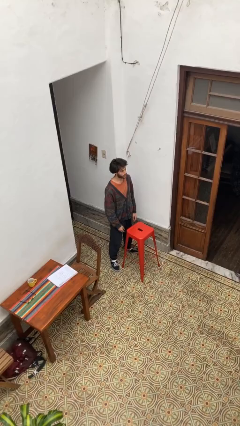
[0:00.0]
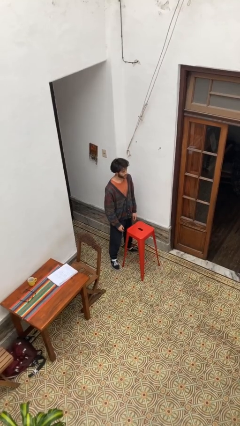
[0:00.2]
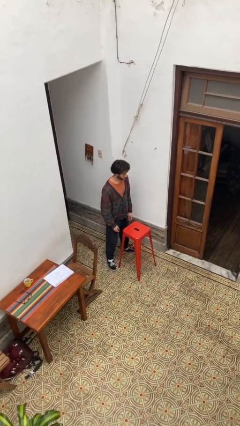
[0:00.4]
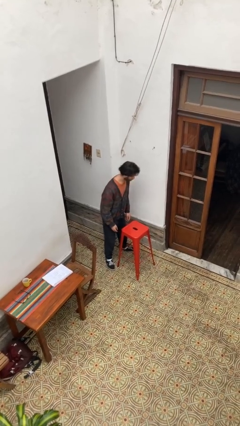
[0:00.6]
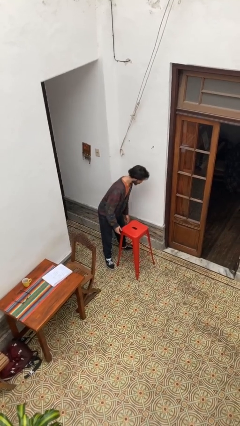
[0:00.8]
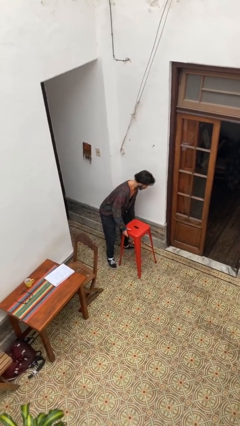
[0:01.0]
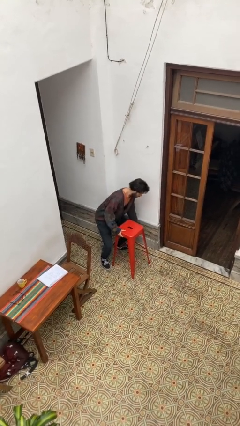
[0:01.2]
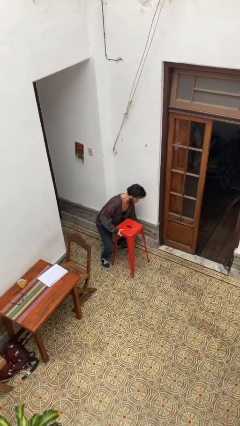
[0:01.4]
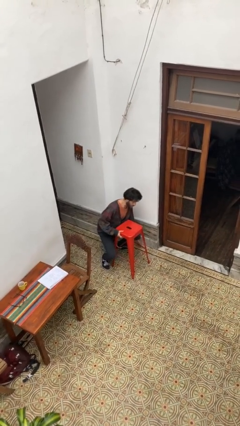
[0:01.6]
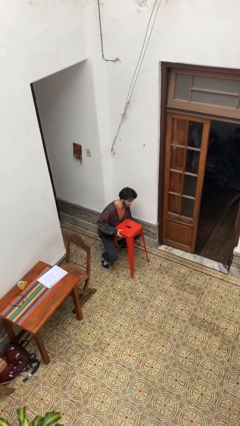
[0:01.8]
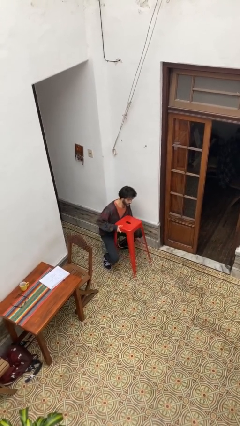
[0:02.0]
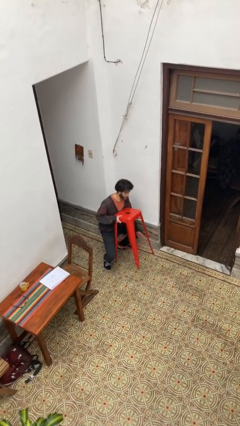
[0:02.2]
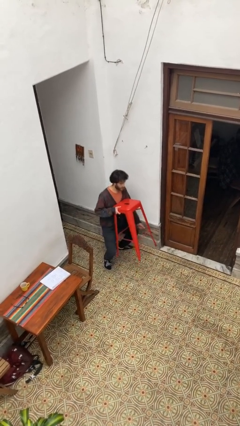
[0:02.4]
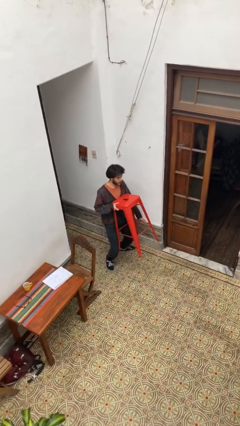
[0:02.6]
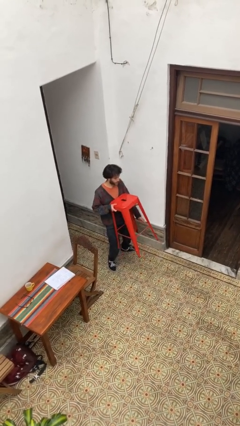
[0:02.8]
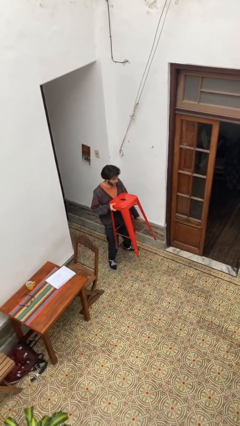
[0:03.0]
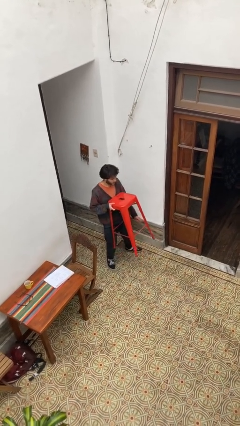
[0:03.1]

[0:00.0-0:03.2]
person picks up object from floor

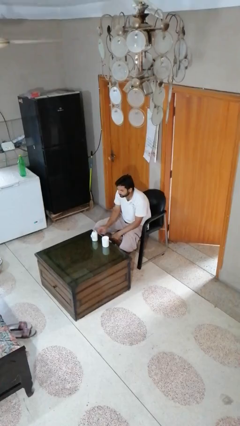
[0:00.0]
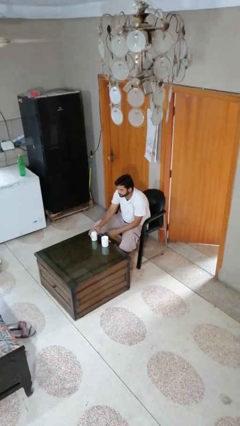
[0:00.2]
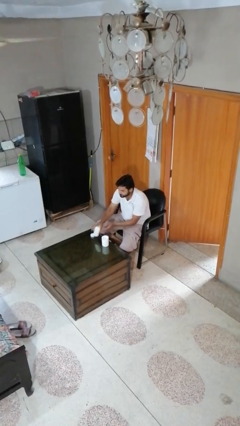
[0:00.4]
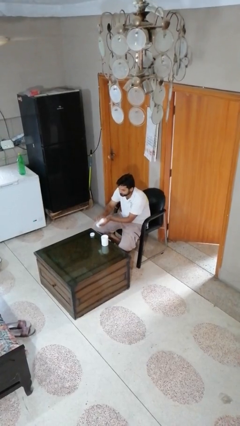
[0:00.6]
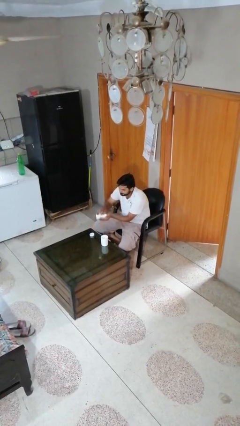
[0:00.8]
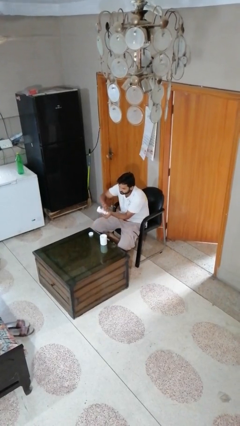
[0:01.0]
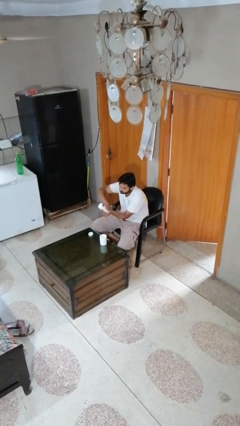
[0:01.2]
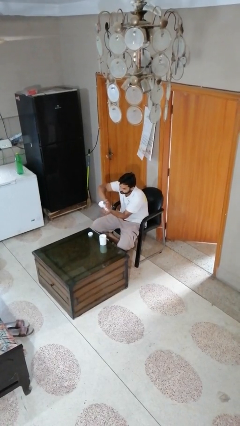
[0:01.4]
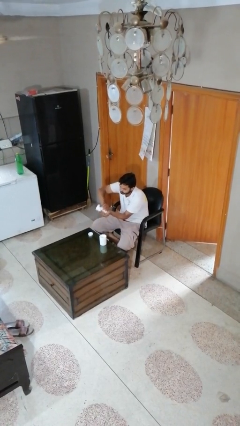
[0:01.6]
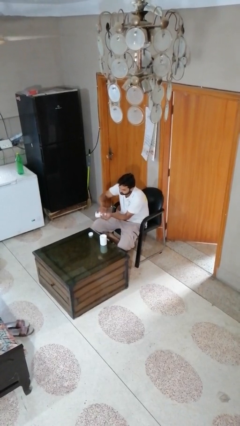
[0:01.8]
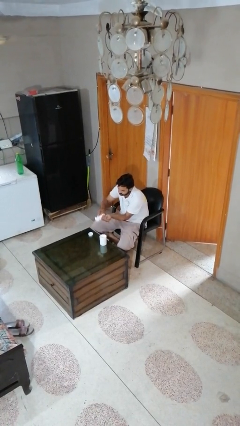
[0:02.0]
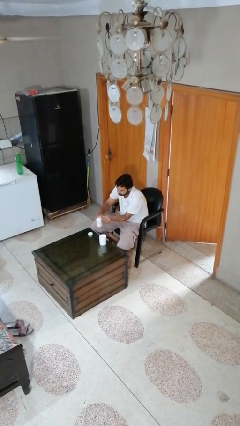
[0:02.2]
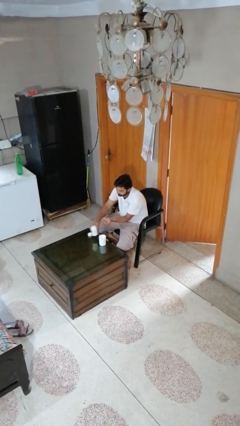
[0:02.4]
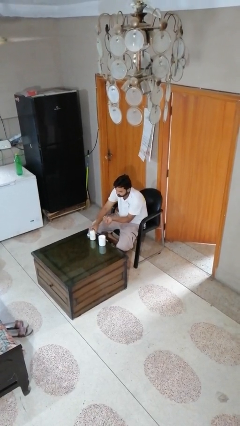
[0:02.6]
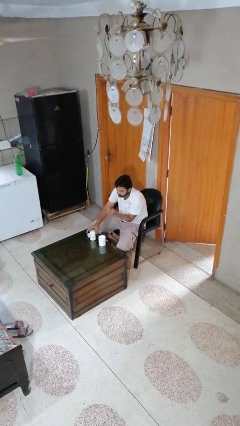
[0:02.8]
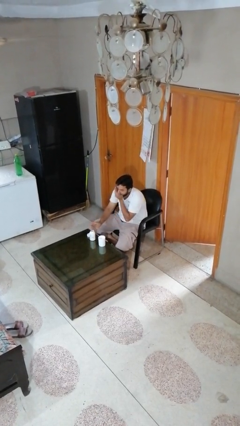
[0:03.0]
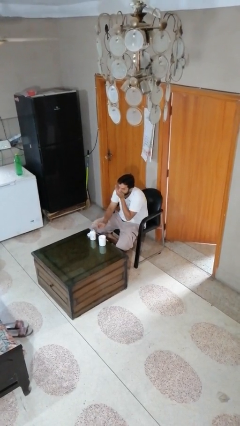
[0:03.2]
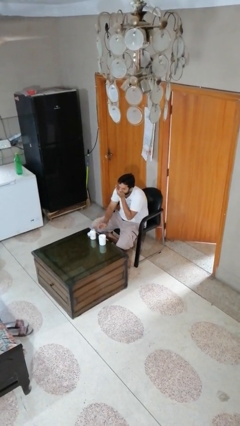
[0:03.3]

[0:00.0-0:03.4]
person takes medicine pills

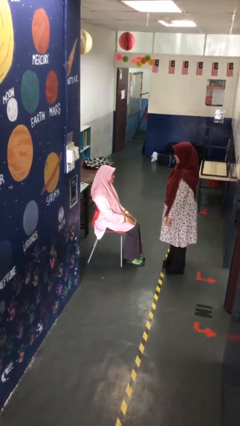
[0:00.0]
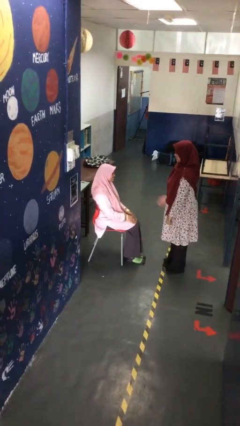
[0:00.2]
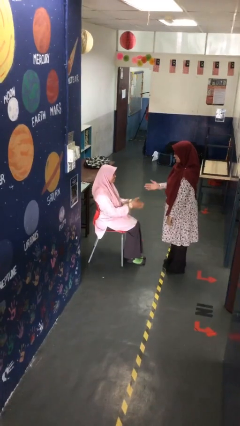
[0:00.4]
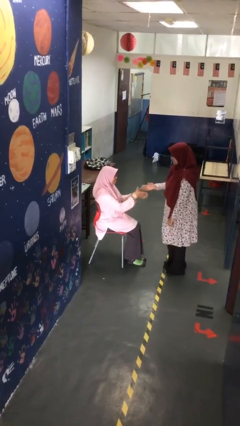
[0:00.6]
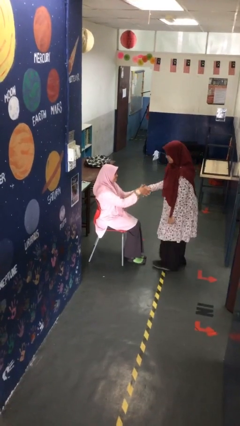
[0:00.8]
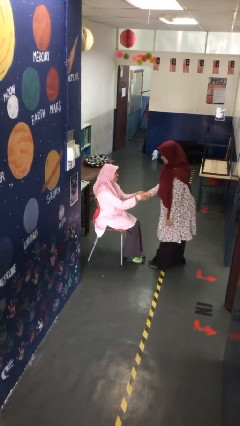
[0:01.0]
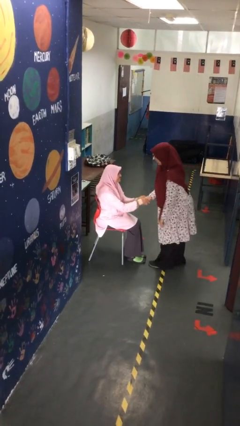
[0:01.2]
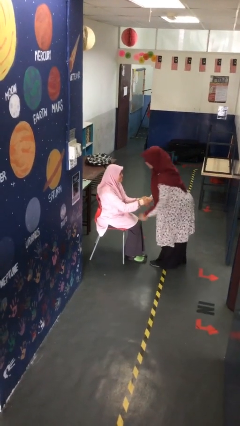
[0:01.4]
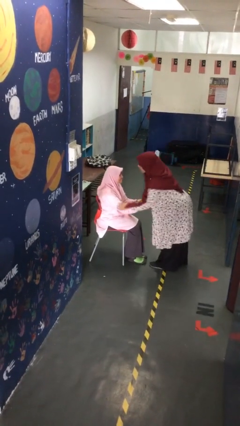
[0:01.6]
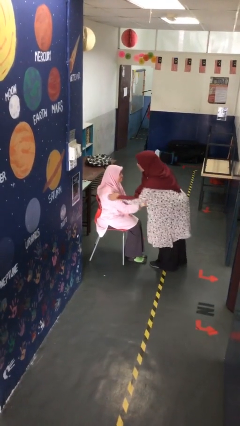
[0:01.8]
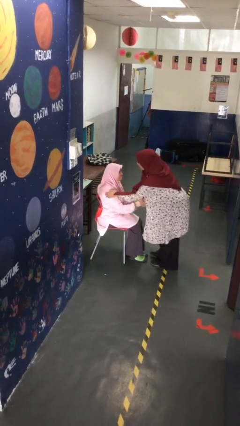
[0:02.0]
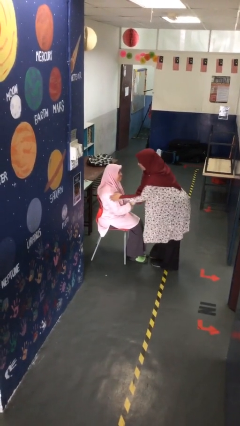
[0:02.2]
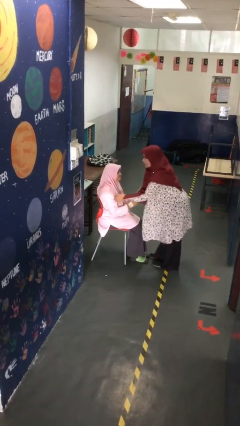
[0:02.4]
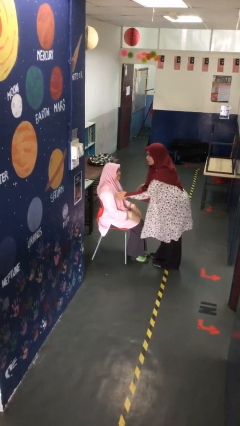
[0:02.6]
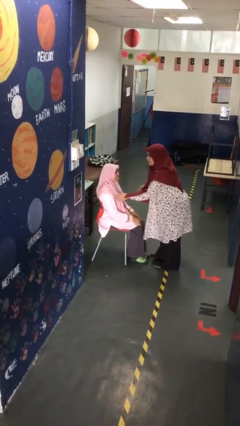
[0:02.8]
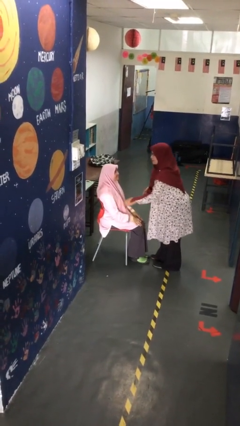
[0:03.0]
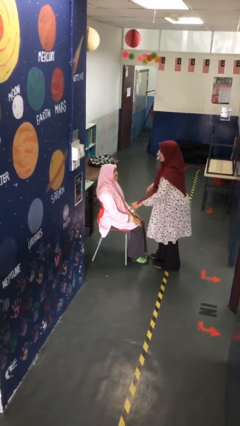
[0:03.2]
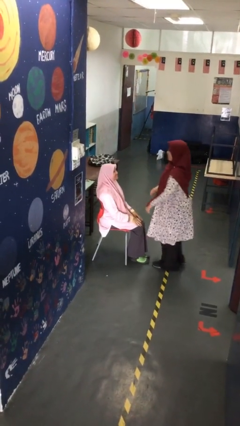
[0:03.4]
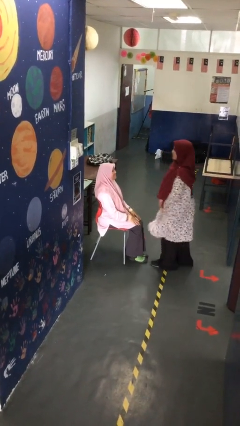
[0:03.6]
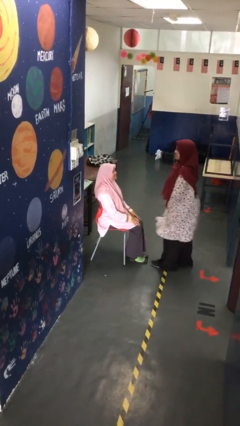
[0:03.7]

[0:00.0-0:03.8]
person shakes hand

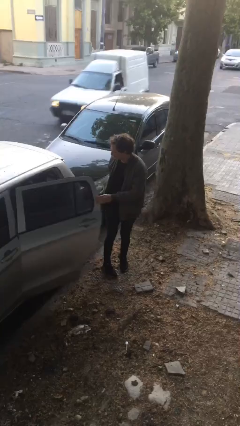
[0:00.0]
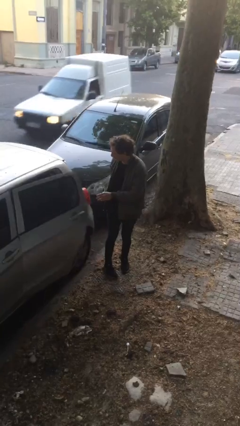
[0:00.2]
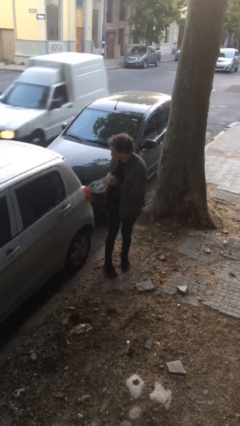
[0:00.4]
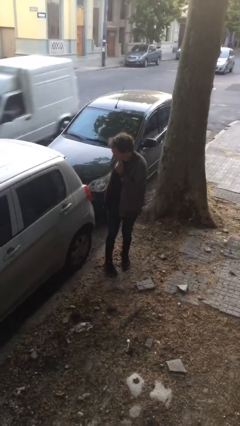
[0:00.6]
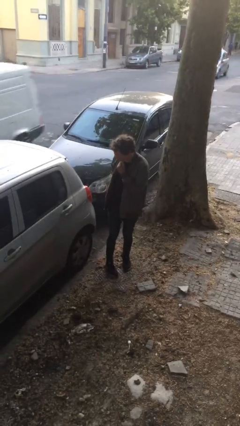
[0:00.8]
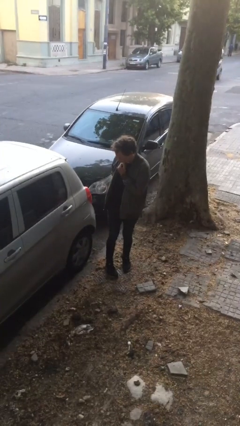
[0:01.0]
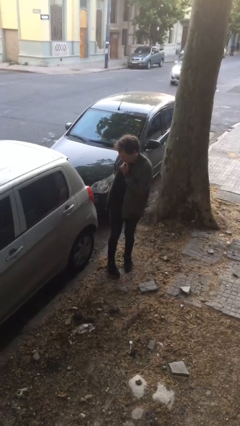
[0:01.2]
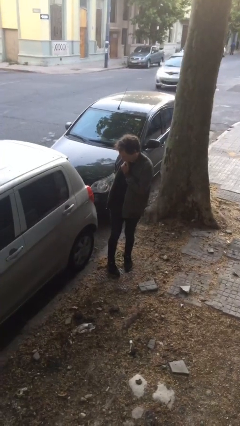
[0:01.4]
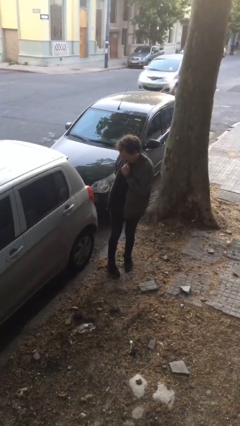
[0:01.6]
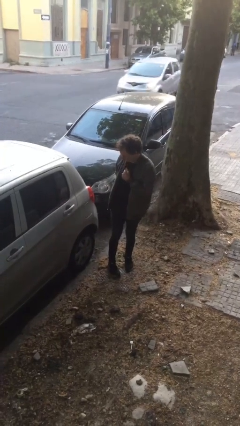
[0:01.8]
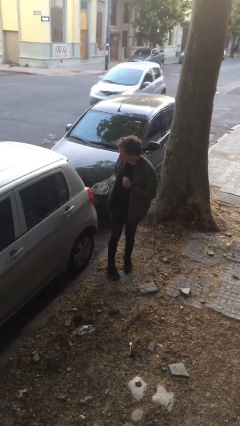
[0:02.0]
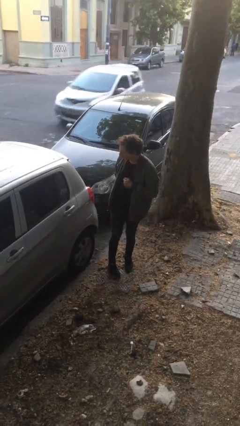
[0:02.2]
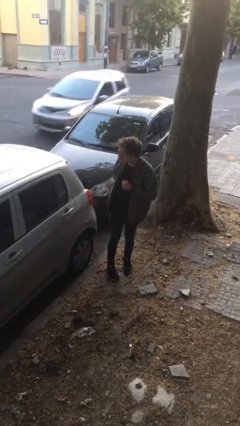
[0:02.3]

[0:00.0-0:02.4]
person closes car door

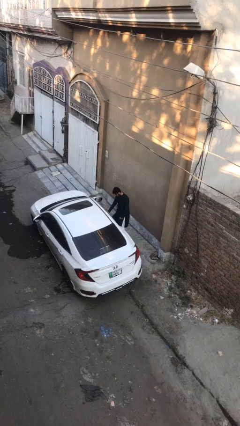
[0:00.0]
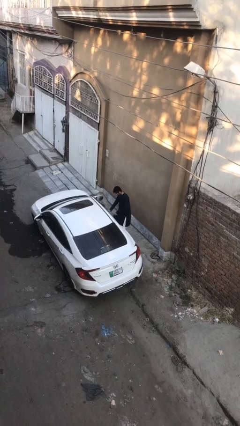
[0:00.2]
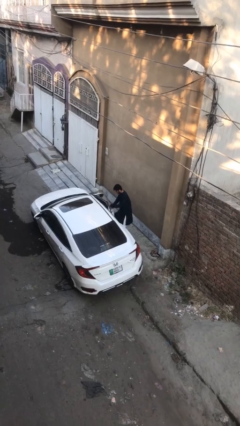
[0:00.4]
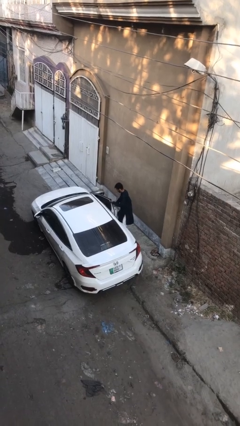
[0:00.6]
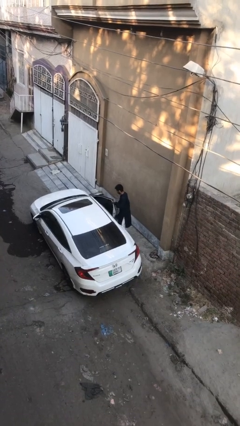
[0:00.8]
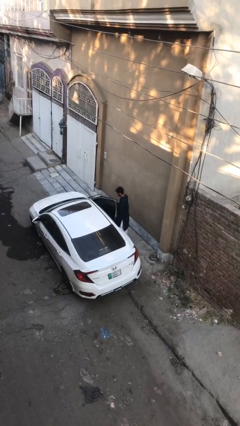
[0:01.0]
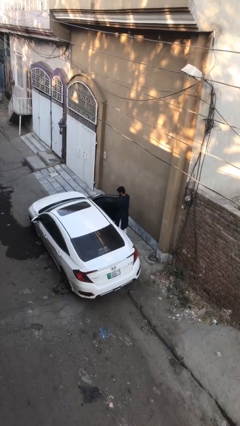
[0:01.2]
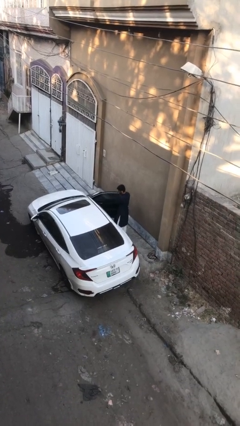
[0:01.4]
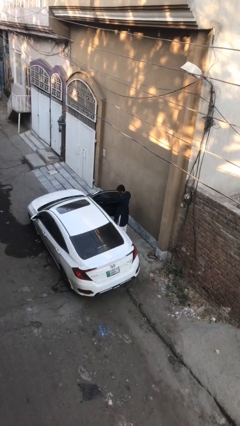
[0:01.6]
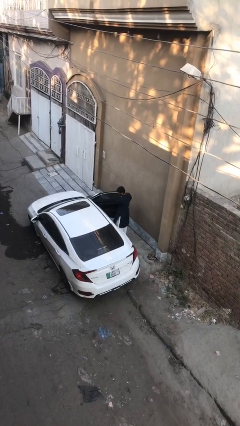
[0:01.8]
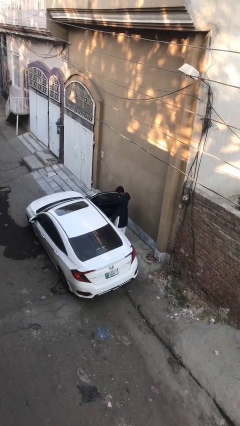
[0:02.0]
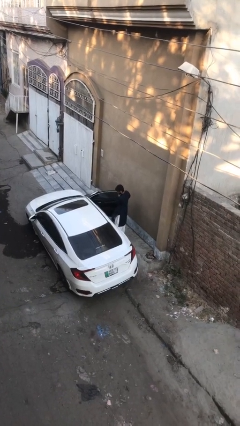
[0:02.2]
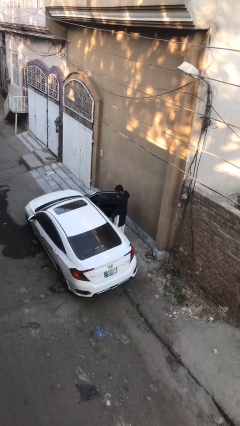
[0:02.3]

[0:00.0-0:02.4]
person opens car door

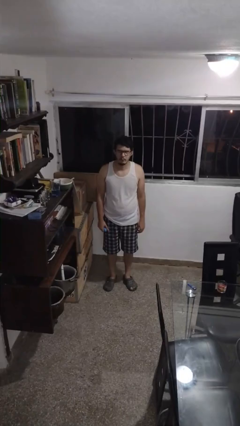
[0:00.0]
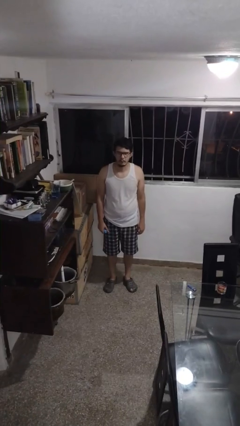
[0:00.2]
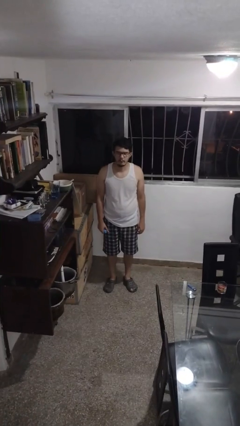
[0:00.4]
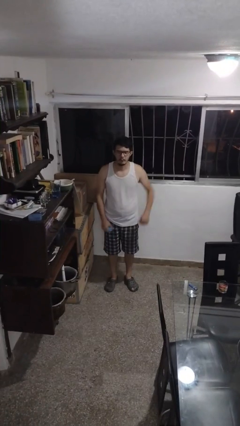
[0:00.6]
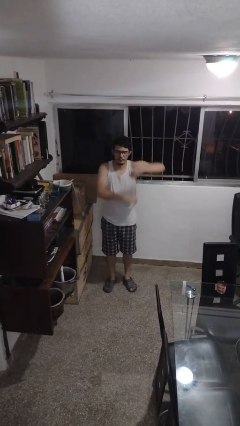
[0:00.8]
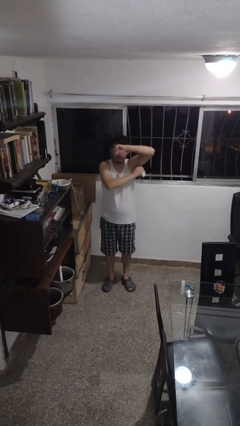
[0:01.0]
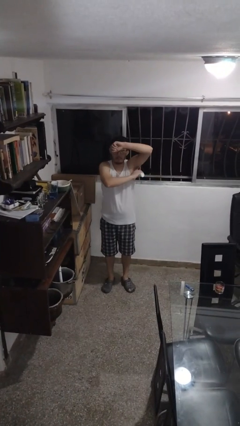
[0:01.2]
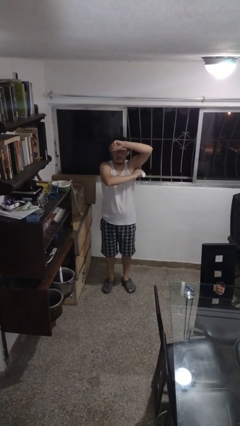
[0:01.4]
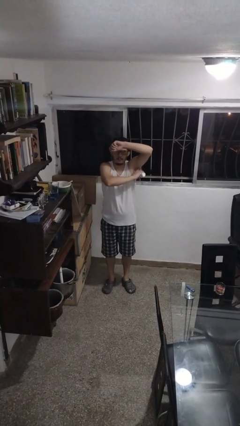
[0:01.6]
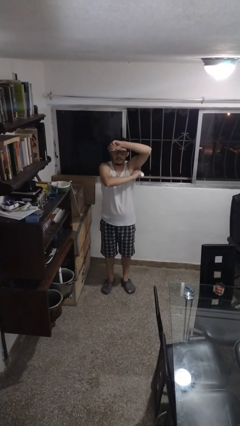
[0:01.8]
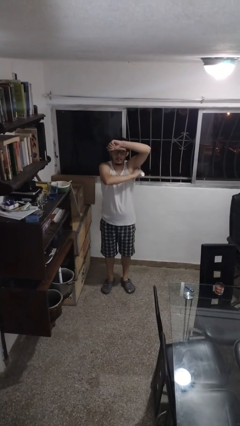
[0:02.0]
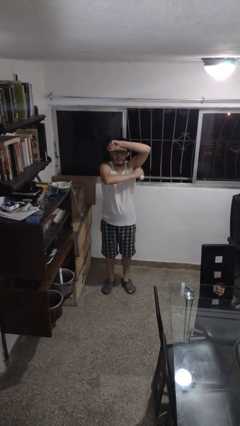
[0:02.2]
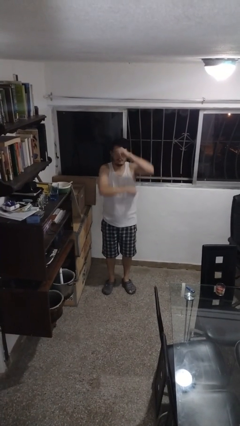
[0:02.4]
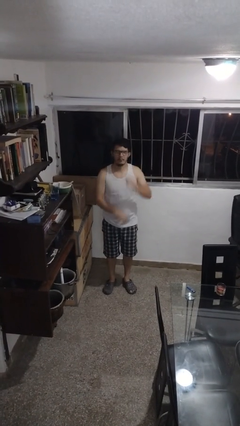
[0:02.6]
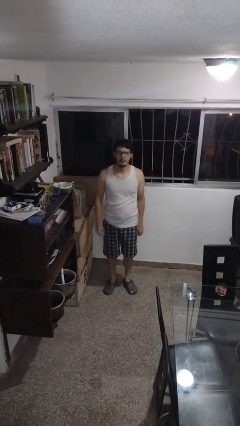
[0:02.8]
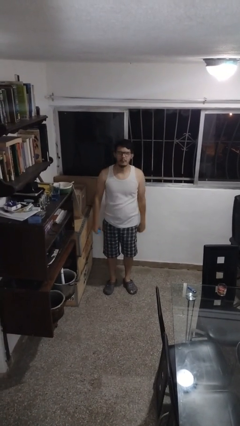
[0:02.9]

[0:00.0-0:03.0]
person applies deodorant
